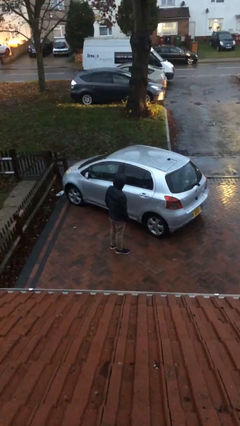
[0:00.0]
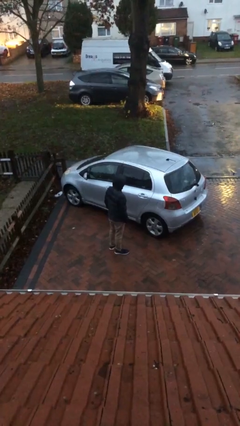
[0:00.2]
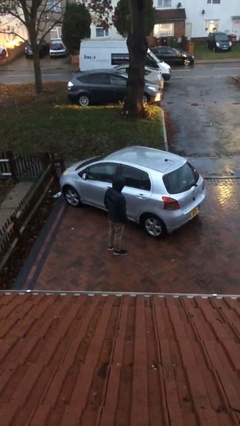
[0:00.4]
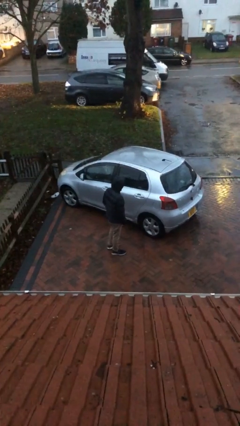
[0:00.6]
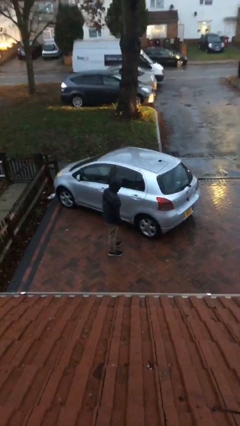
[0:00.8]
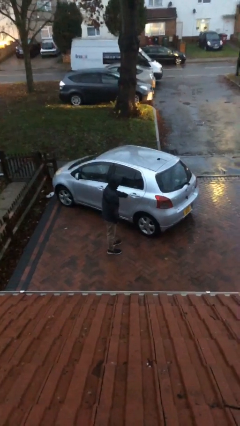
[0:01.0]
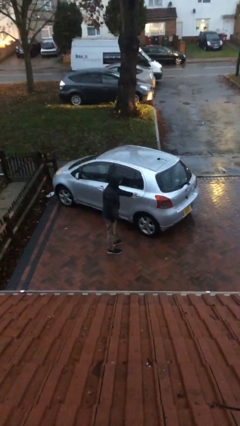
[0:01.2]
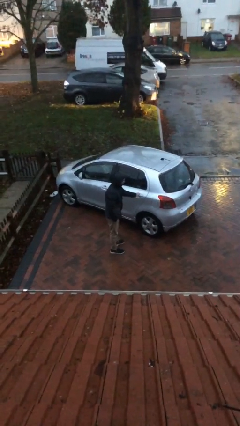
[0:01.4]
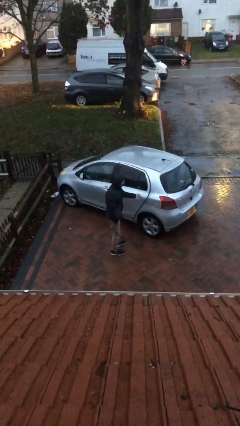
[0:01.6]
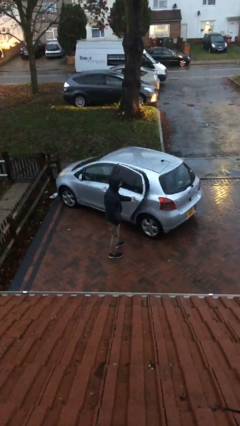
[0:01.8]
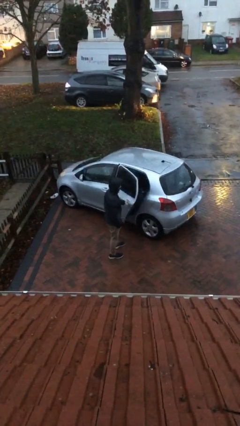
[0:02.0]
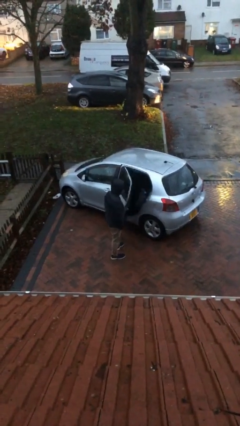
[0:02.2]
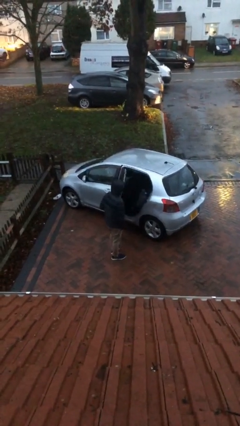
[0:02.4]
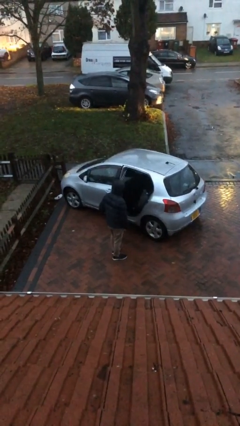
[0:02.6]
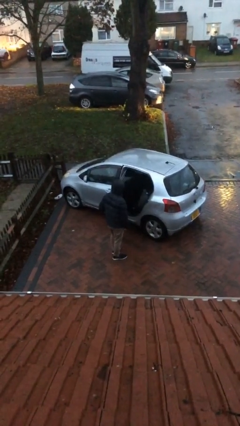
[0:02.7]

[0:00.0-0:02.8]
person opens car door

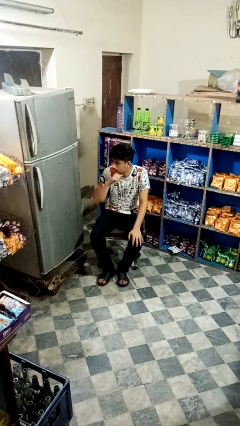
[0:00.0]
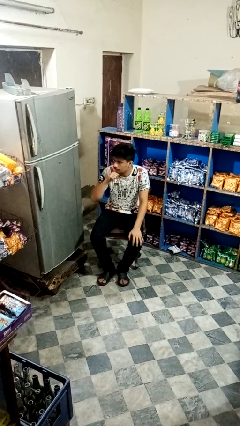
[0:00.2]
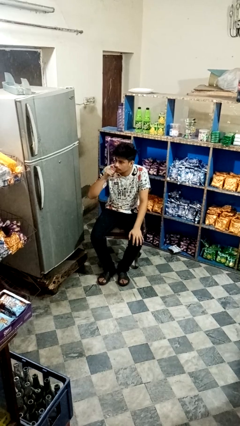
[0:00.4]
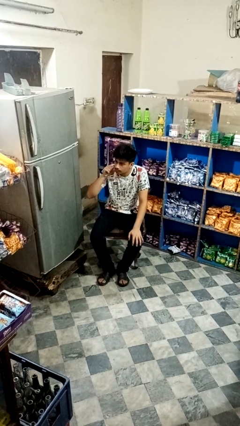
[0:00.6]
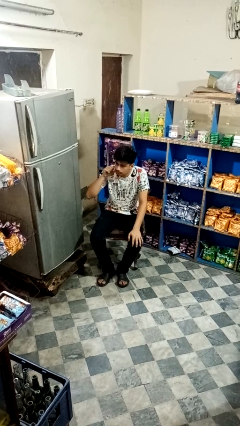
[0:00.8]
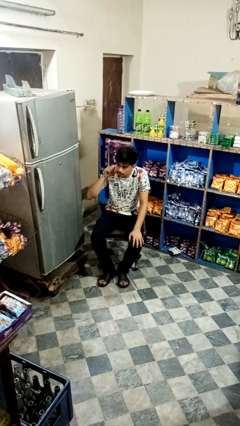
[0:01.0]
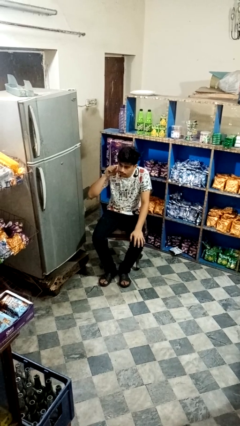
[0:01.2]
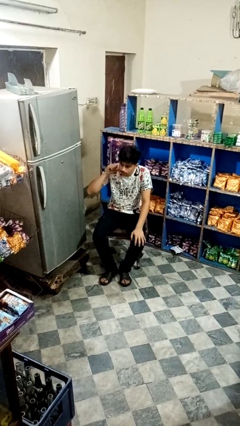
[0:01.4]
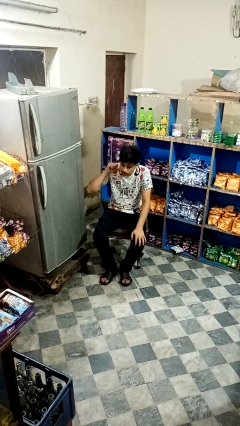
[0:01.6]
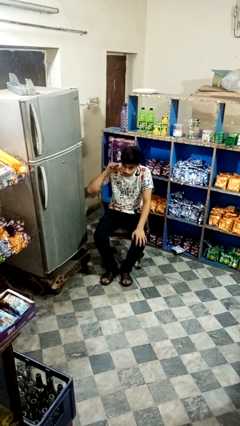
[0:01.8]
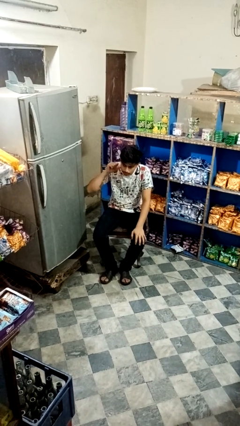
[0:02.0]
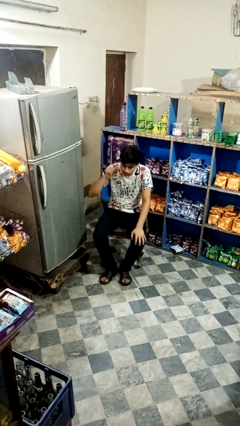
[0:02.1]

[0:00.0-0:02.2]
person gestures cut

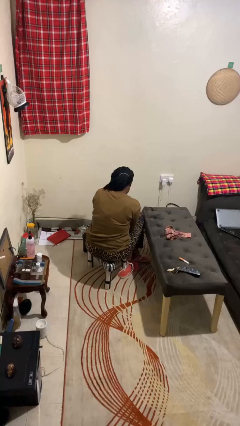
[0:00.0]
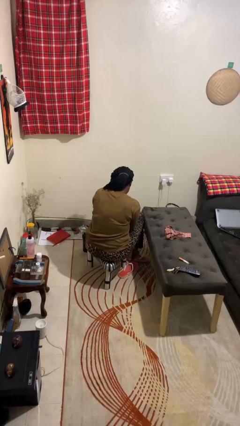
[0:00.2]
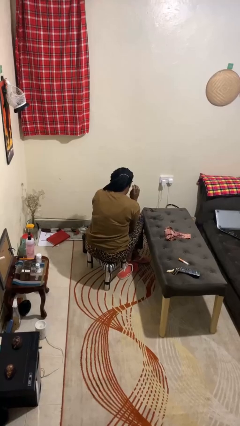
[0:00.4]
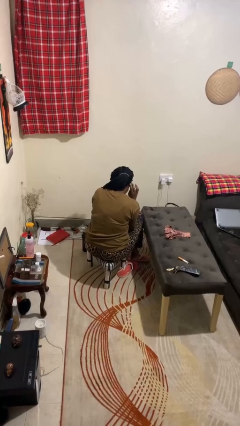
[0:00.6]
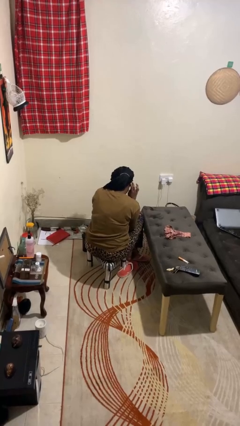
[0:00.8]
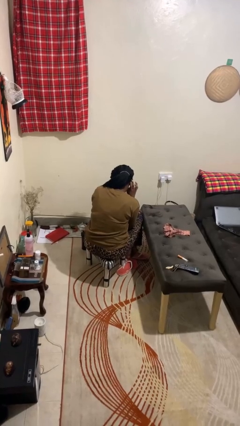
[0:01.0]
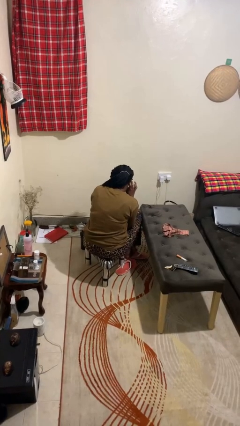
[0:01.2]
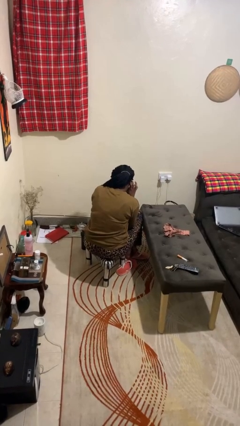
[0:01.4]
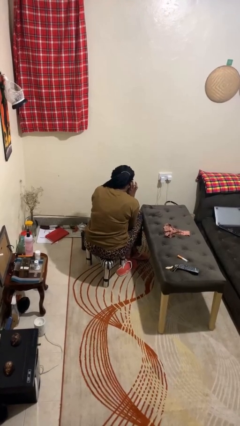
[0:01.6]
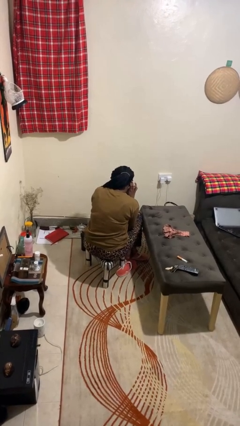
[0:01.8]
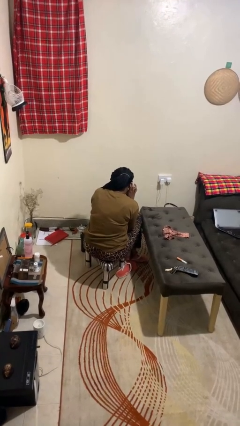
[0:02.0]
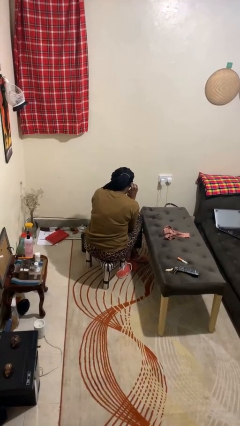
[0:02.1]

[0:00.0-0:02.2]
person gestures listen closely

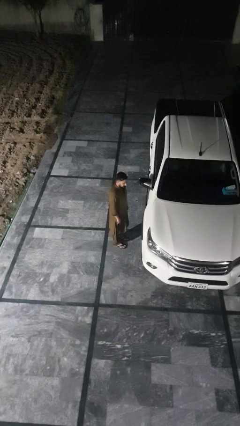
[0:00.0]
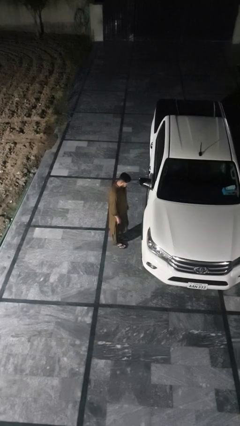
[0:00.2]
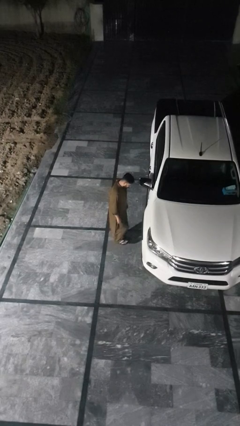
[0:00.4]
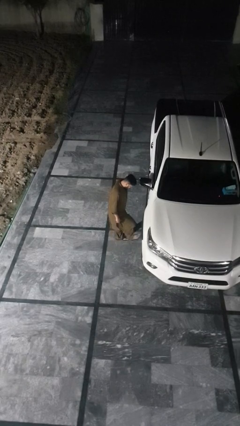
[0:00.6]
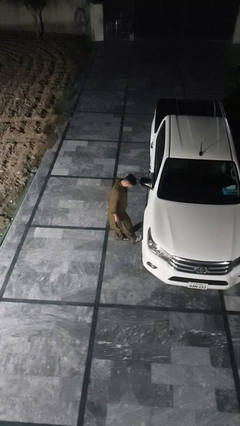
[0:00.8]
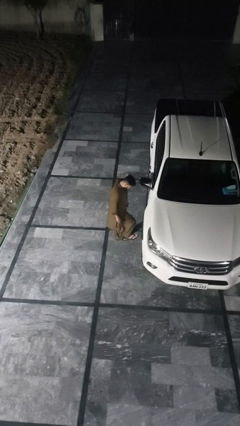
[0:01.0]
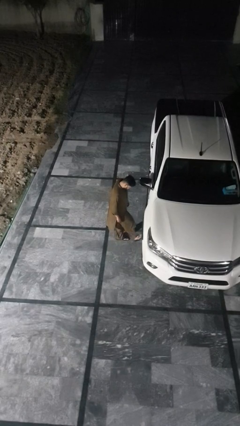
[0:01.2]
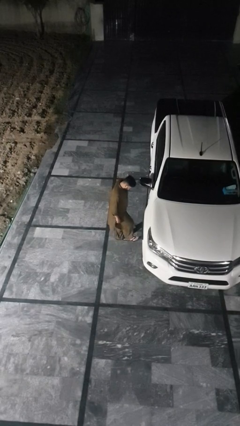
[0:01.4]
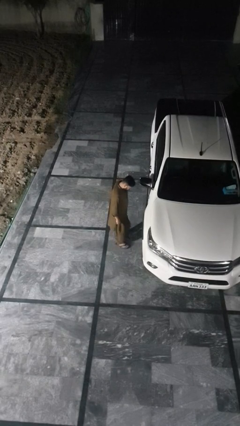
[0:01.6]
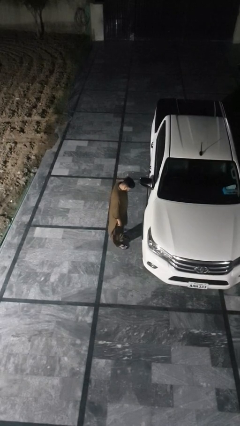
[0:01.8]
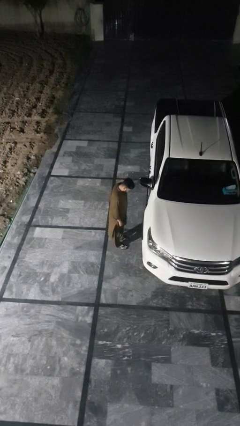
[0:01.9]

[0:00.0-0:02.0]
person kicks car tires

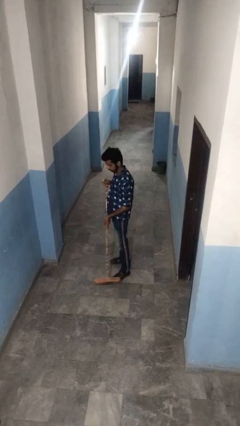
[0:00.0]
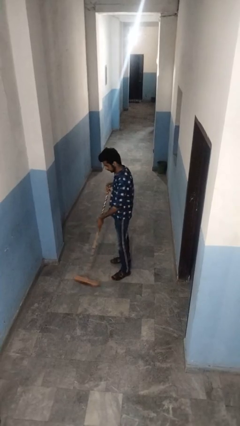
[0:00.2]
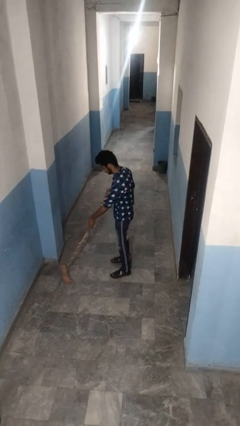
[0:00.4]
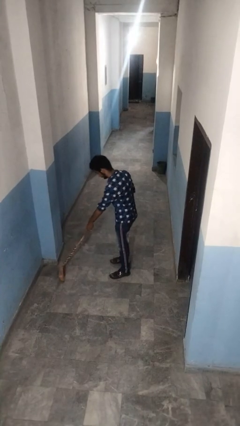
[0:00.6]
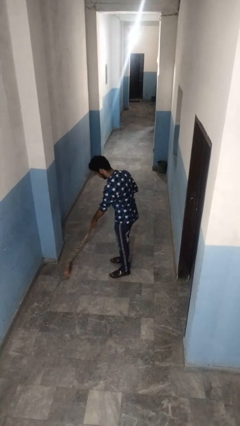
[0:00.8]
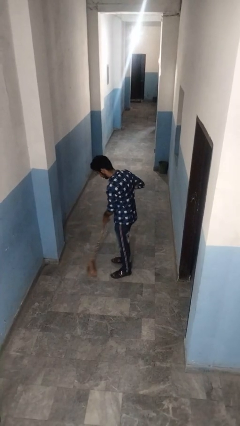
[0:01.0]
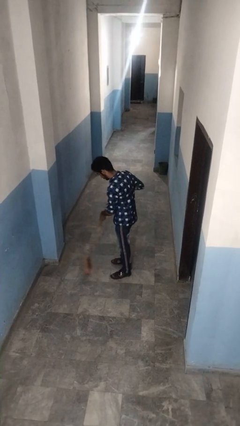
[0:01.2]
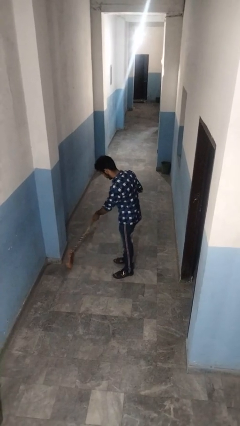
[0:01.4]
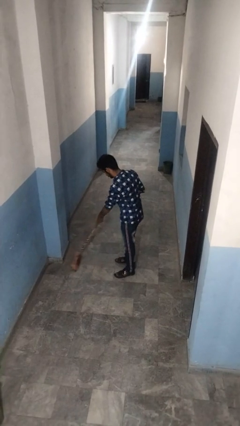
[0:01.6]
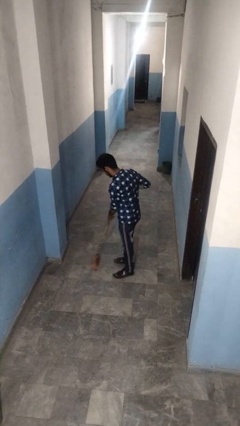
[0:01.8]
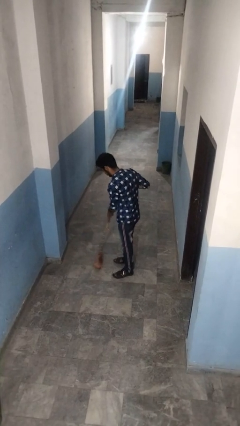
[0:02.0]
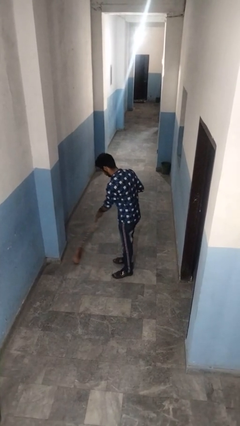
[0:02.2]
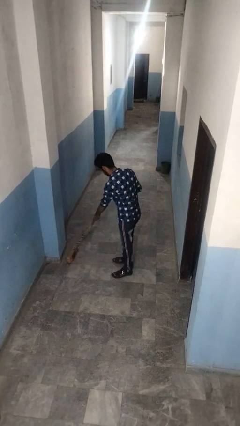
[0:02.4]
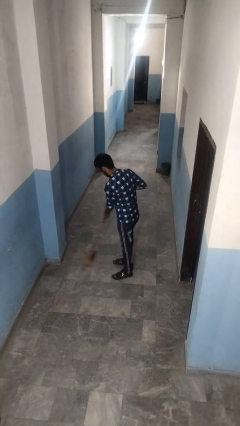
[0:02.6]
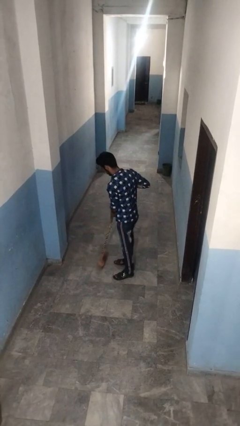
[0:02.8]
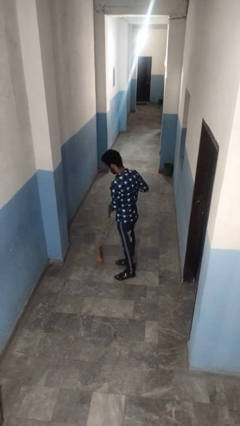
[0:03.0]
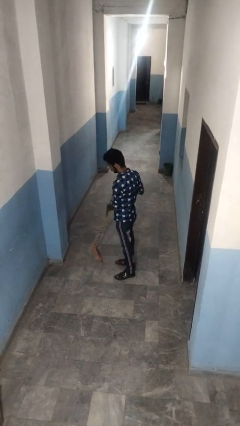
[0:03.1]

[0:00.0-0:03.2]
person sweeps floor

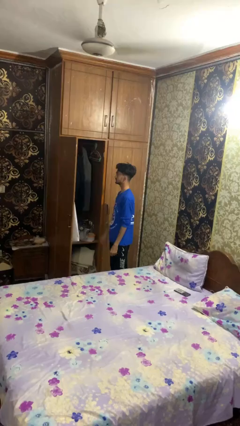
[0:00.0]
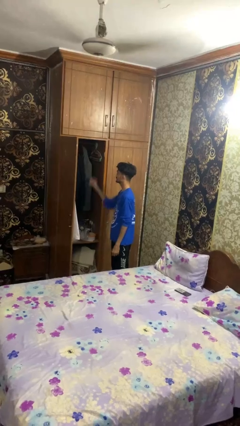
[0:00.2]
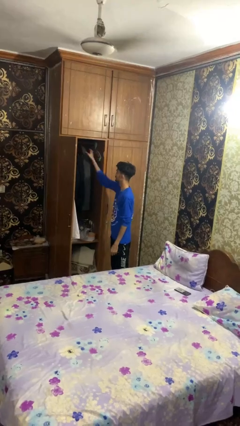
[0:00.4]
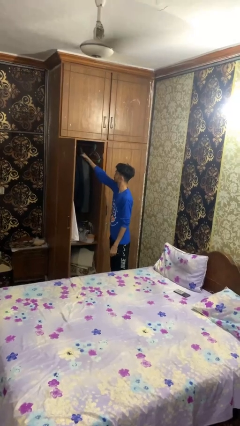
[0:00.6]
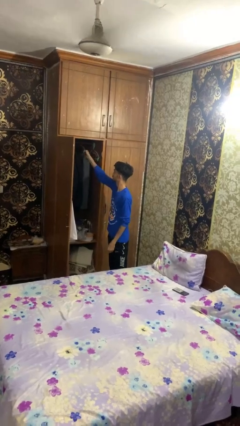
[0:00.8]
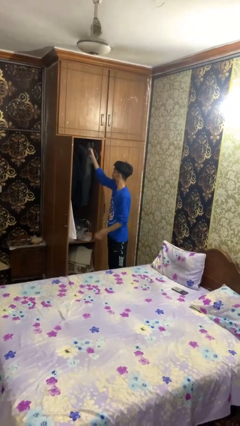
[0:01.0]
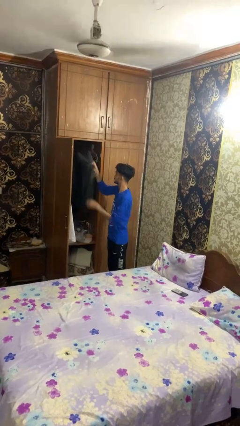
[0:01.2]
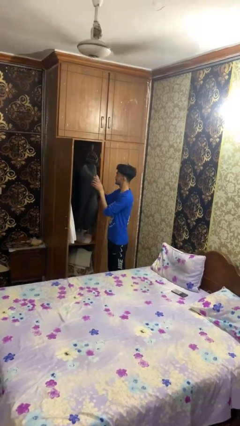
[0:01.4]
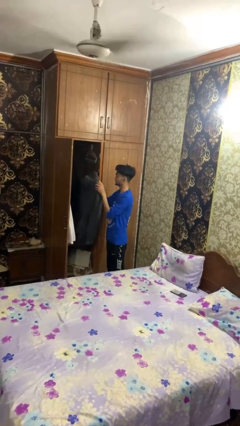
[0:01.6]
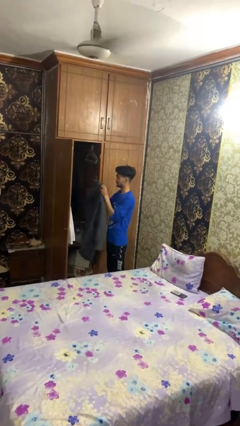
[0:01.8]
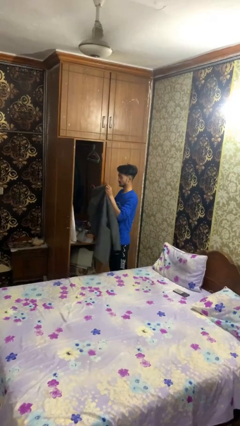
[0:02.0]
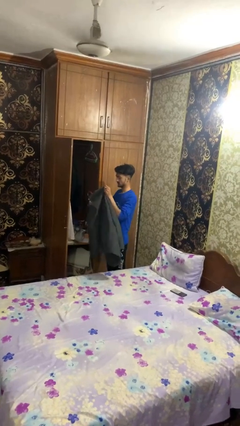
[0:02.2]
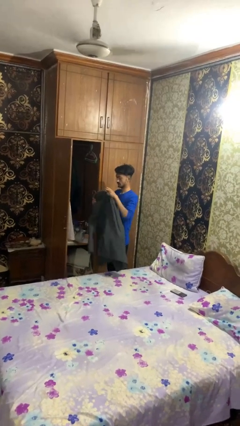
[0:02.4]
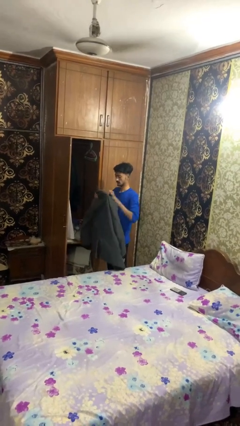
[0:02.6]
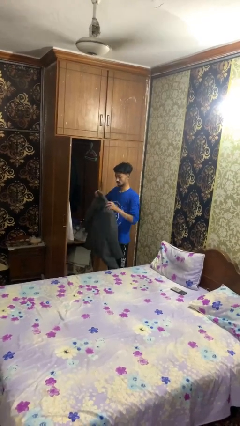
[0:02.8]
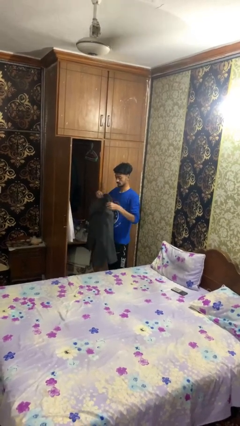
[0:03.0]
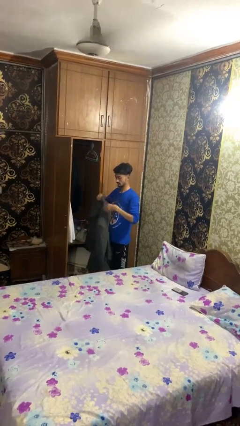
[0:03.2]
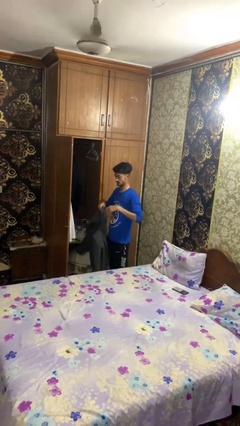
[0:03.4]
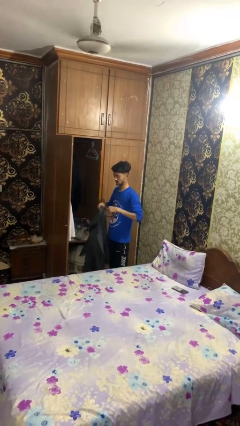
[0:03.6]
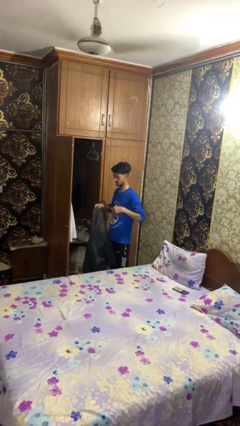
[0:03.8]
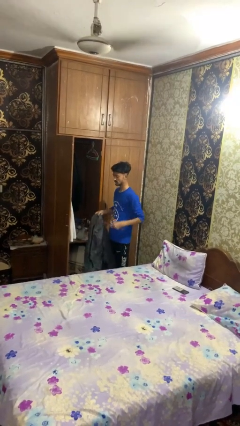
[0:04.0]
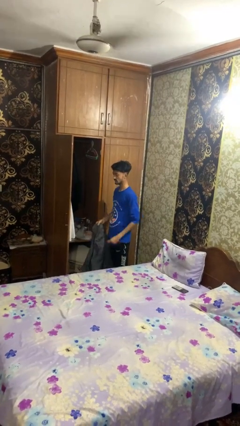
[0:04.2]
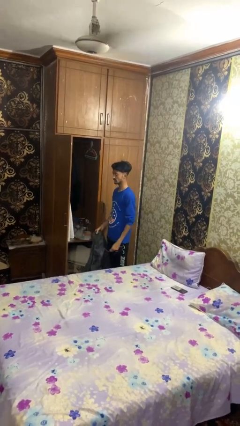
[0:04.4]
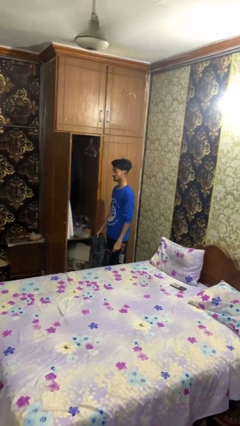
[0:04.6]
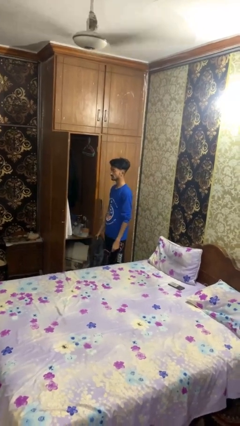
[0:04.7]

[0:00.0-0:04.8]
person takes clothes from closet
